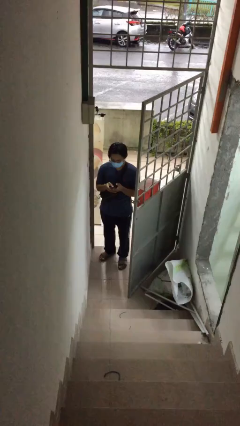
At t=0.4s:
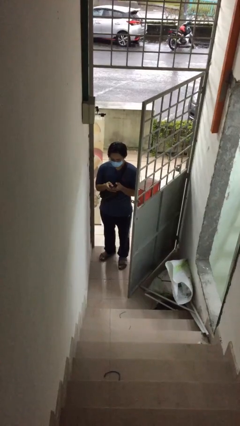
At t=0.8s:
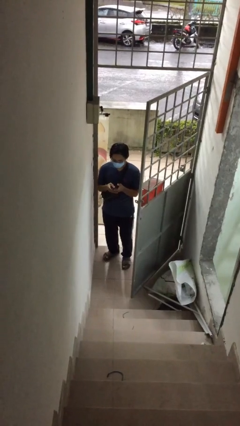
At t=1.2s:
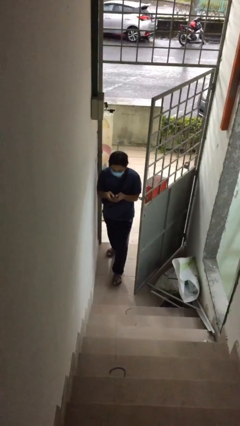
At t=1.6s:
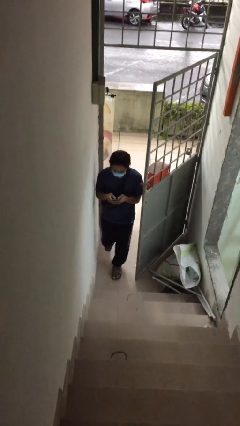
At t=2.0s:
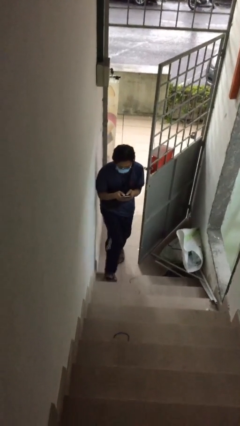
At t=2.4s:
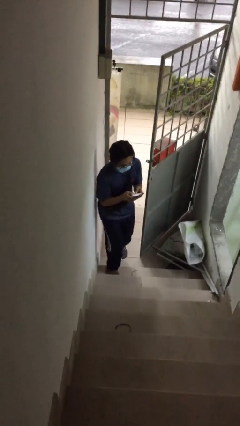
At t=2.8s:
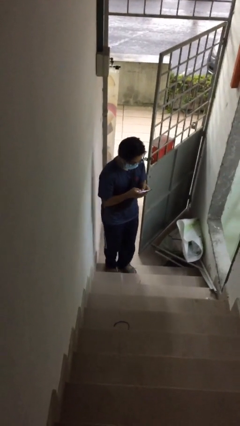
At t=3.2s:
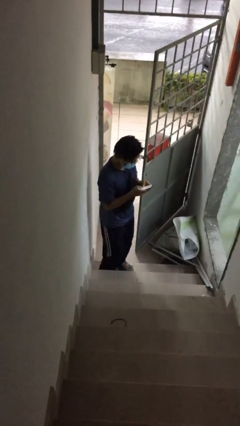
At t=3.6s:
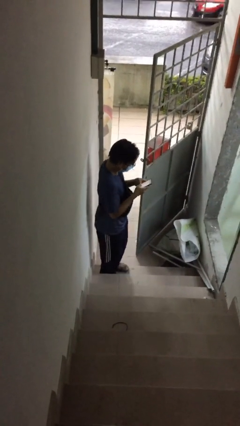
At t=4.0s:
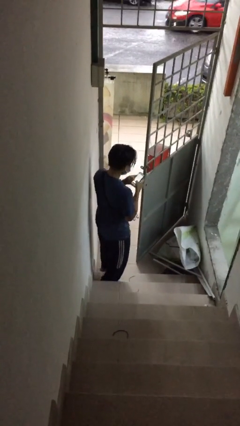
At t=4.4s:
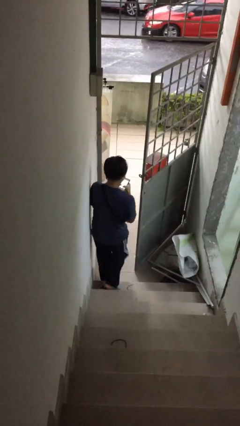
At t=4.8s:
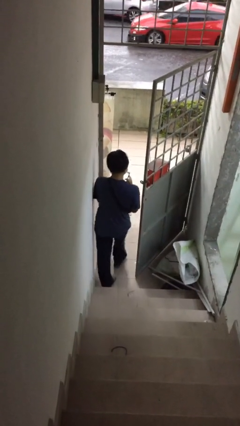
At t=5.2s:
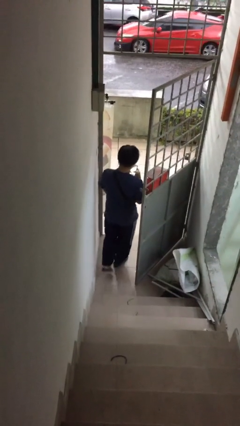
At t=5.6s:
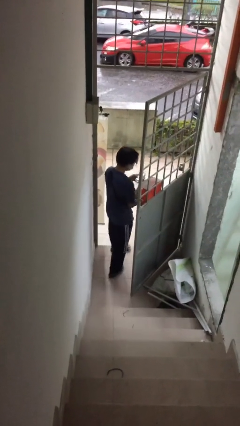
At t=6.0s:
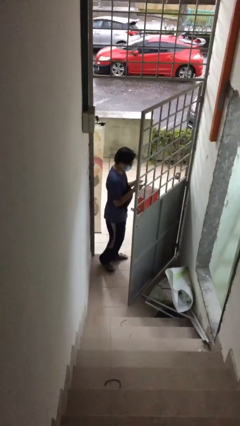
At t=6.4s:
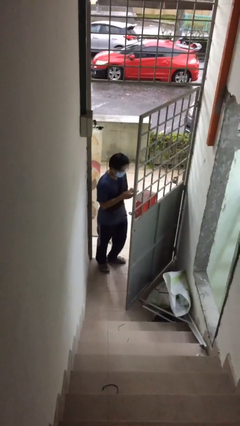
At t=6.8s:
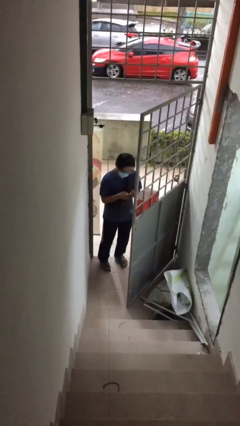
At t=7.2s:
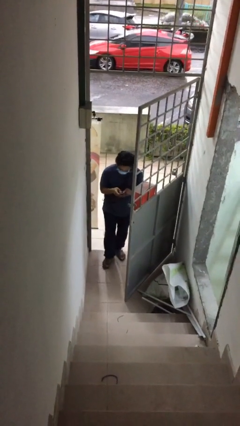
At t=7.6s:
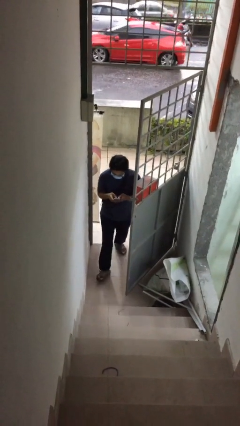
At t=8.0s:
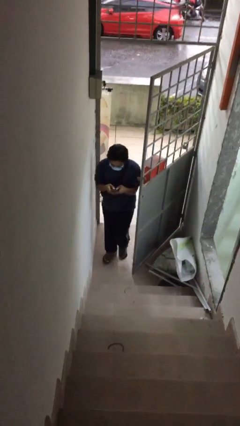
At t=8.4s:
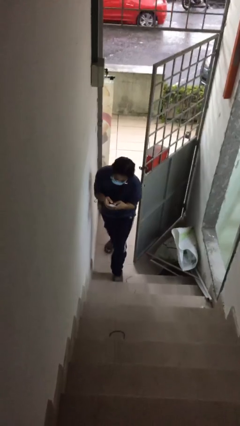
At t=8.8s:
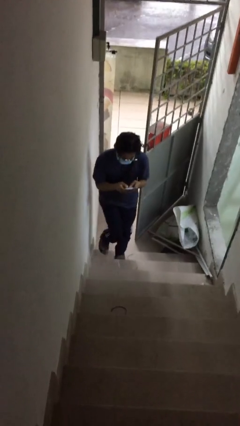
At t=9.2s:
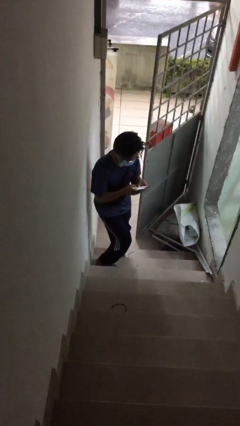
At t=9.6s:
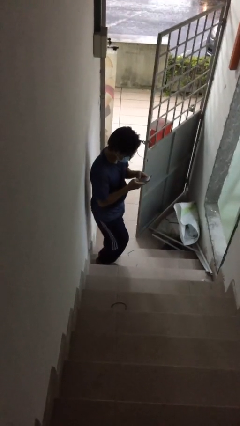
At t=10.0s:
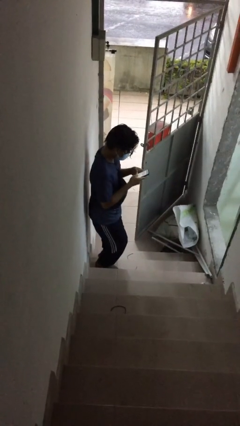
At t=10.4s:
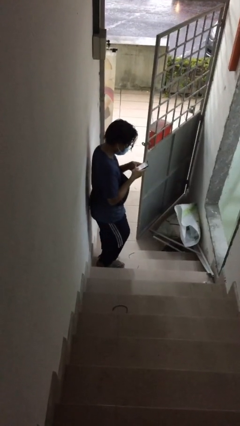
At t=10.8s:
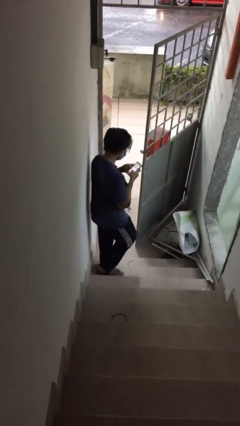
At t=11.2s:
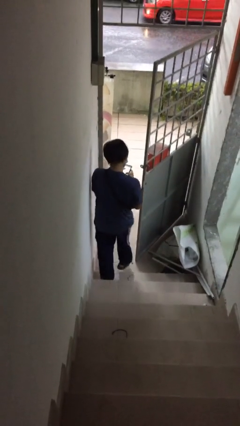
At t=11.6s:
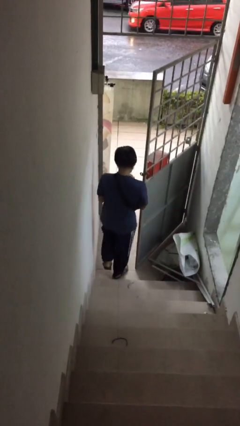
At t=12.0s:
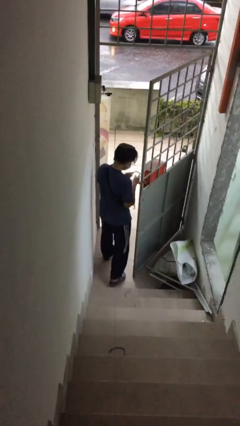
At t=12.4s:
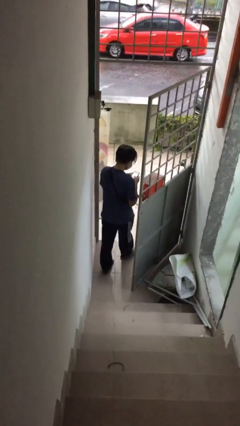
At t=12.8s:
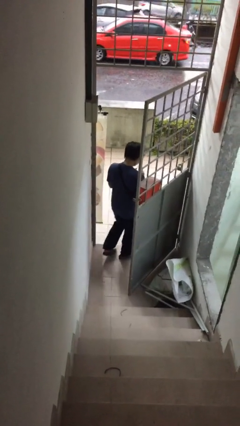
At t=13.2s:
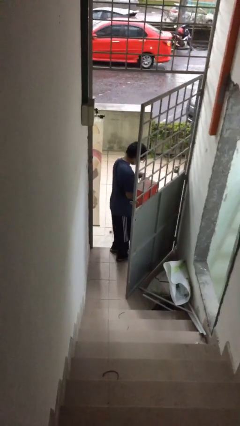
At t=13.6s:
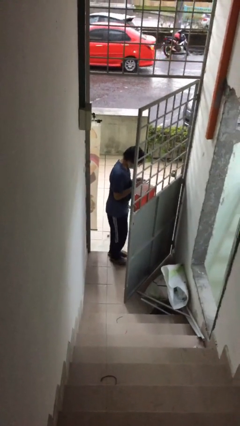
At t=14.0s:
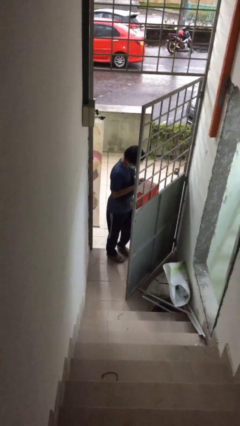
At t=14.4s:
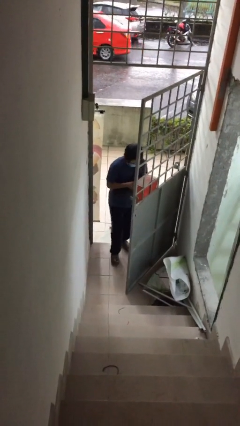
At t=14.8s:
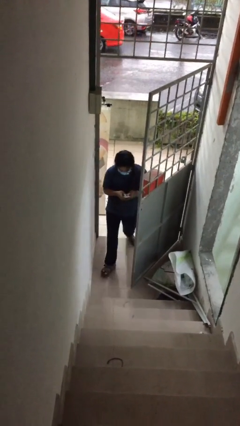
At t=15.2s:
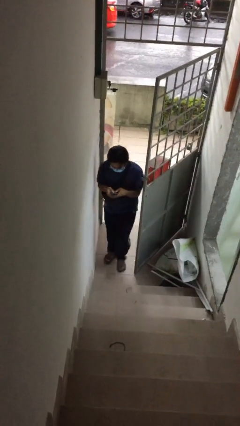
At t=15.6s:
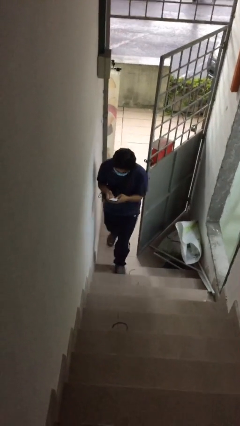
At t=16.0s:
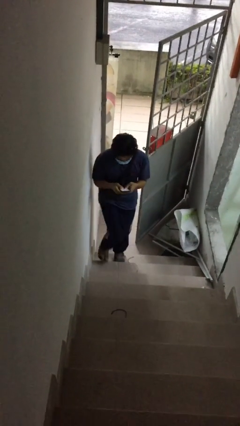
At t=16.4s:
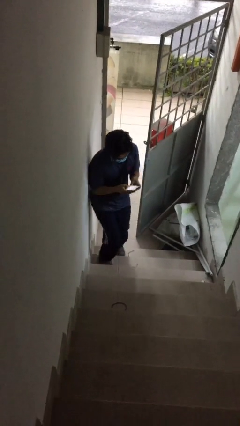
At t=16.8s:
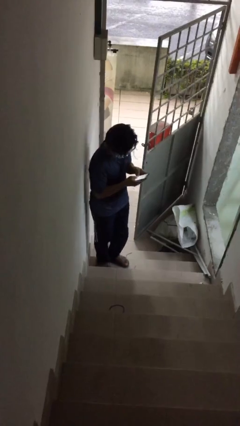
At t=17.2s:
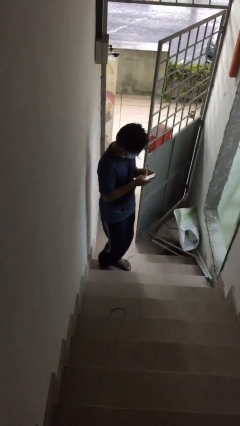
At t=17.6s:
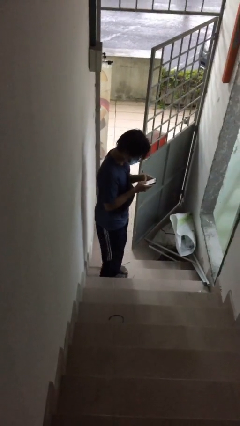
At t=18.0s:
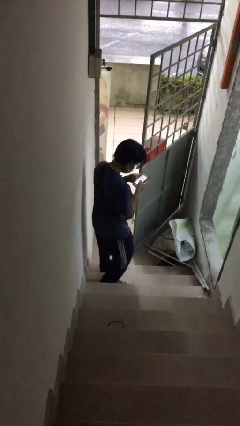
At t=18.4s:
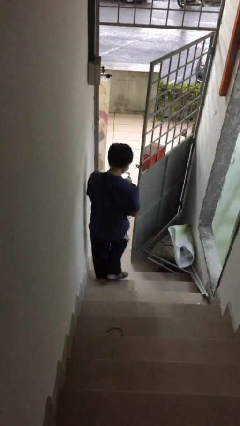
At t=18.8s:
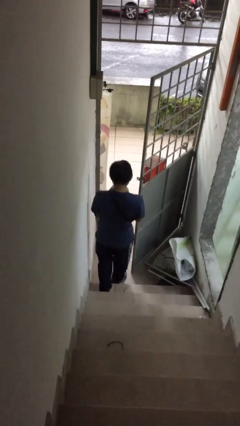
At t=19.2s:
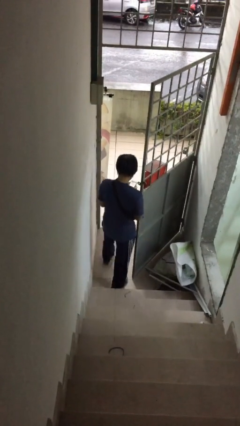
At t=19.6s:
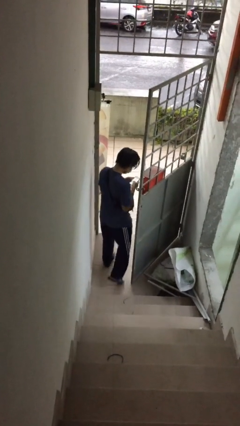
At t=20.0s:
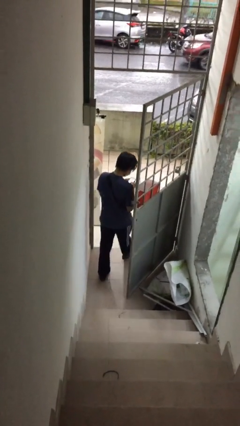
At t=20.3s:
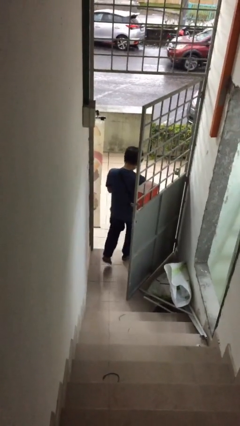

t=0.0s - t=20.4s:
person texts on phone

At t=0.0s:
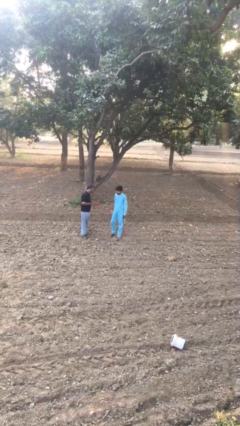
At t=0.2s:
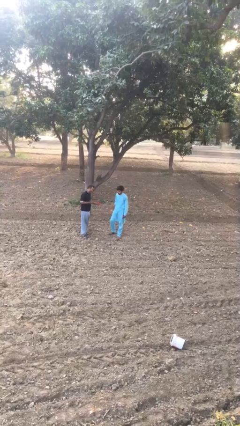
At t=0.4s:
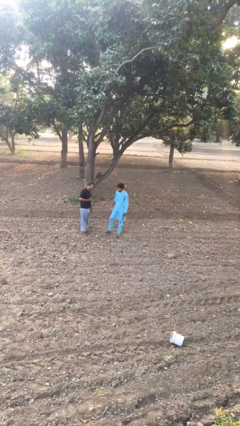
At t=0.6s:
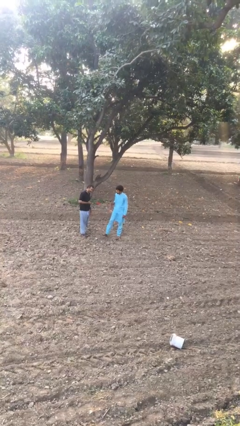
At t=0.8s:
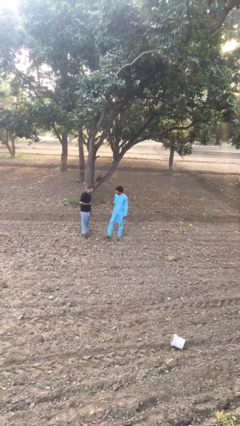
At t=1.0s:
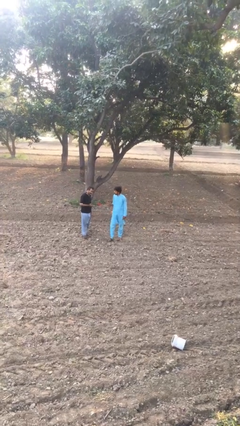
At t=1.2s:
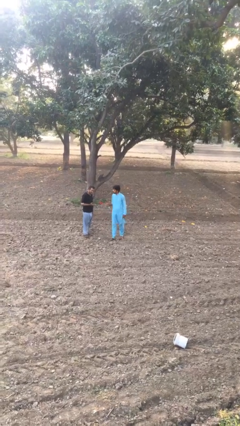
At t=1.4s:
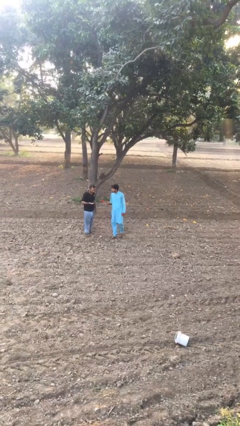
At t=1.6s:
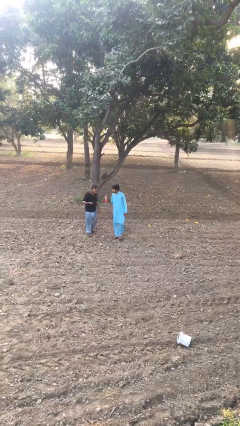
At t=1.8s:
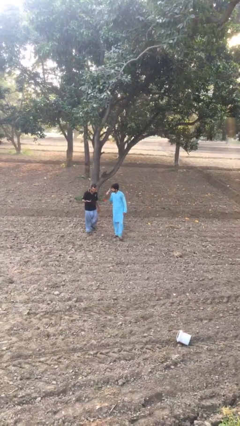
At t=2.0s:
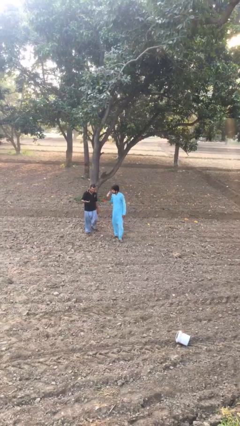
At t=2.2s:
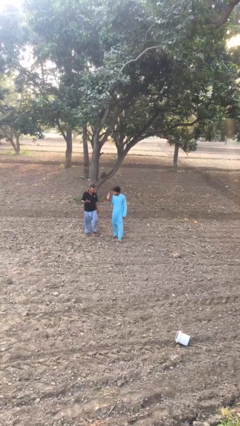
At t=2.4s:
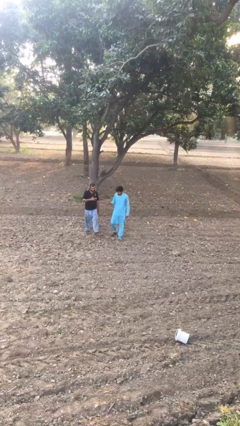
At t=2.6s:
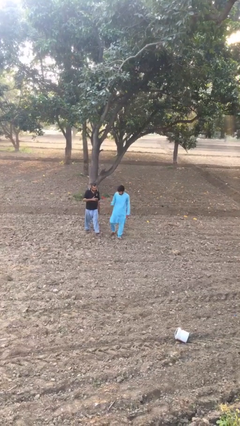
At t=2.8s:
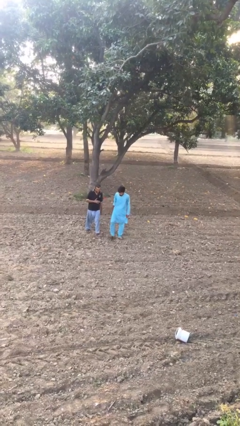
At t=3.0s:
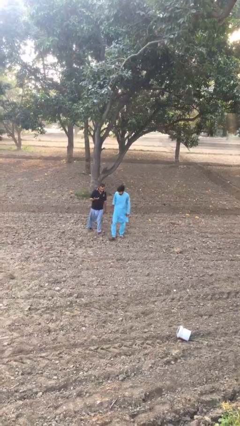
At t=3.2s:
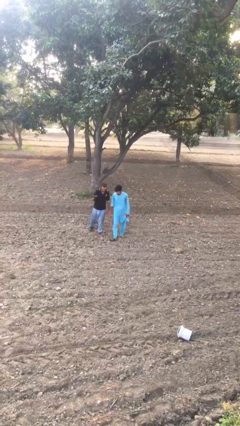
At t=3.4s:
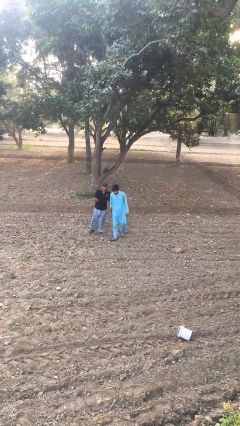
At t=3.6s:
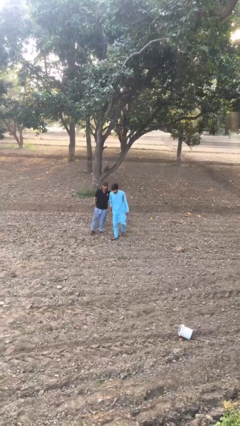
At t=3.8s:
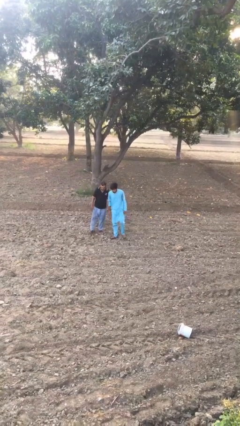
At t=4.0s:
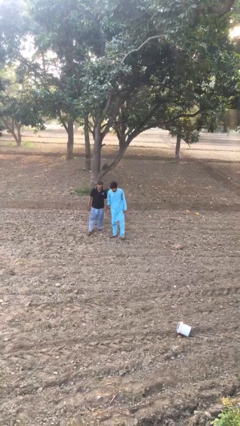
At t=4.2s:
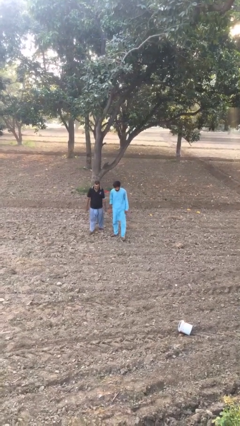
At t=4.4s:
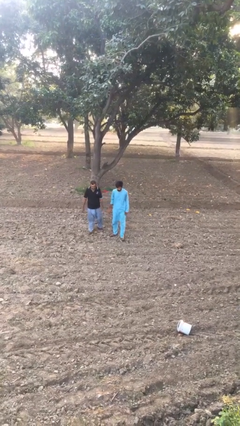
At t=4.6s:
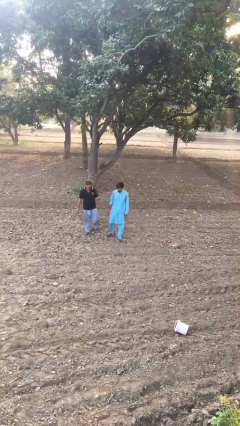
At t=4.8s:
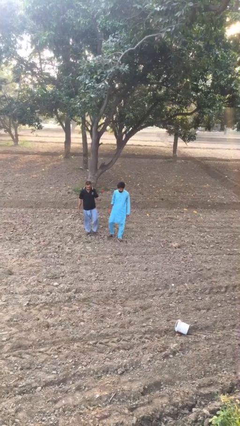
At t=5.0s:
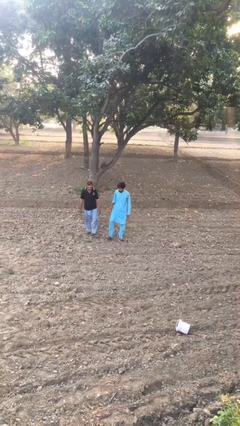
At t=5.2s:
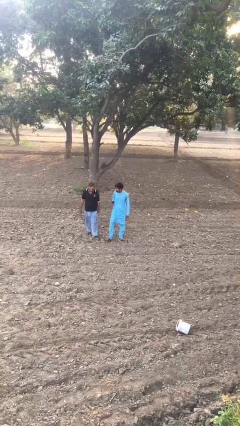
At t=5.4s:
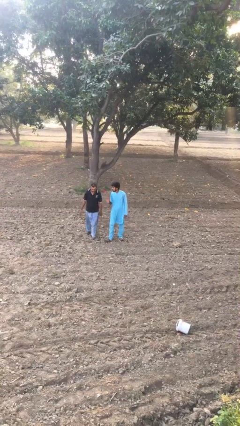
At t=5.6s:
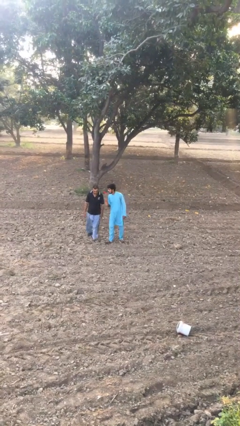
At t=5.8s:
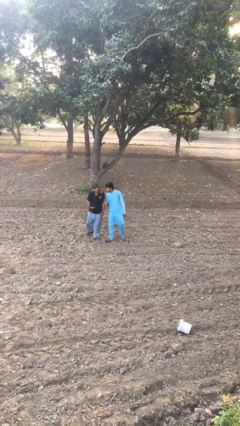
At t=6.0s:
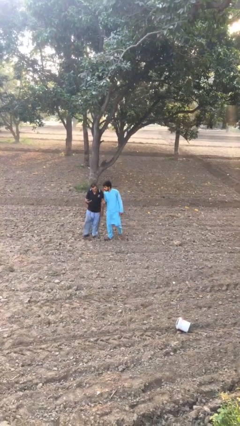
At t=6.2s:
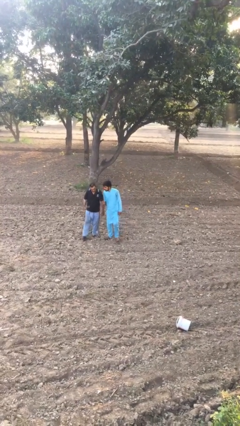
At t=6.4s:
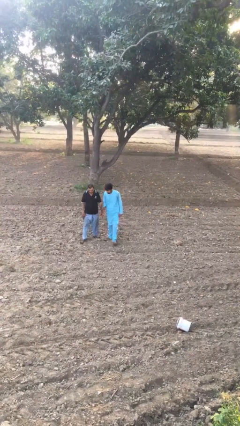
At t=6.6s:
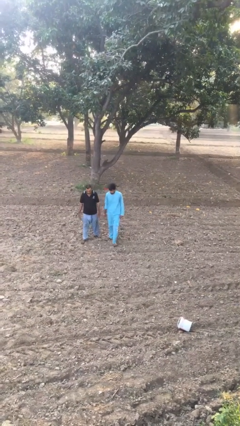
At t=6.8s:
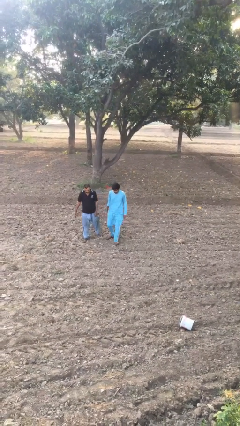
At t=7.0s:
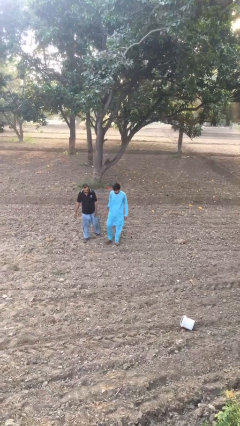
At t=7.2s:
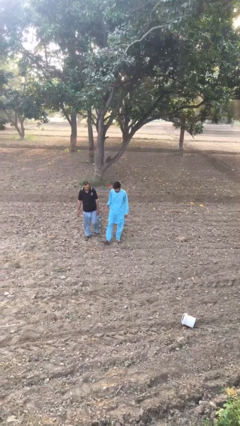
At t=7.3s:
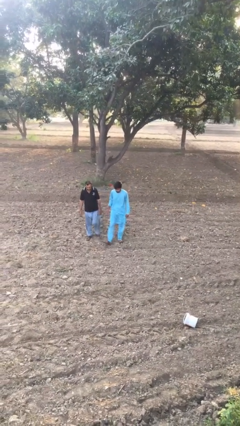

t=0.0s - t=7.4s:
person talks to person

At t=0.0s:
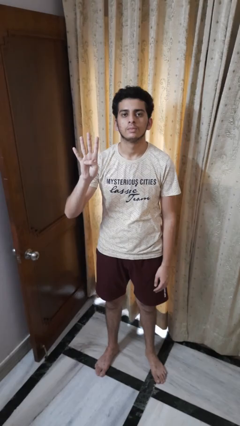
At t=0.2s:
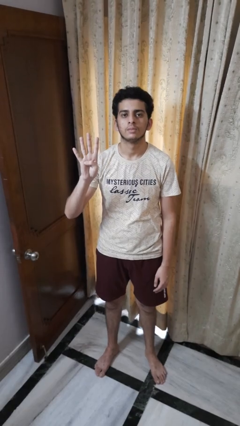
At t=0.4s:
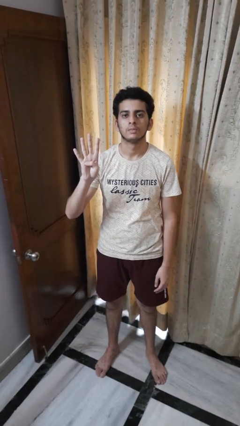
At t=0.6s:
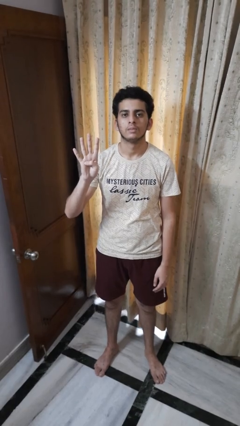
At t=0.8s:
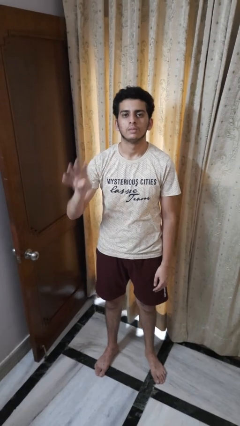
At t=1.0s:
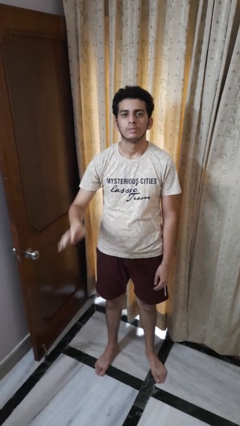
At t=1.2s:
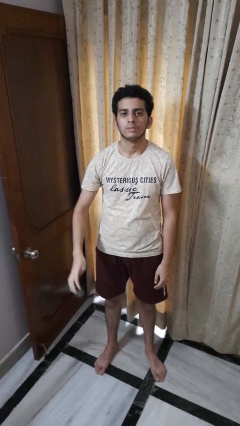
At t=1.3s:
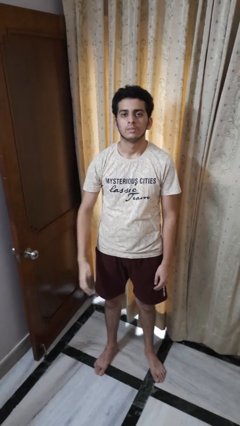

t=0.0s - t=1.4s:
person gestures number four
